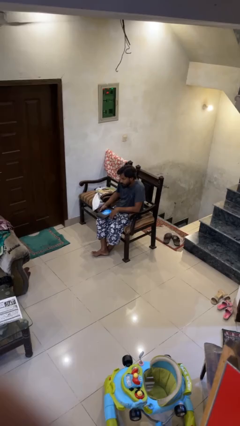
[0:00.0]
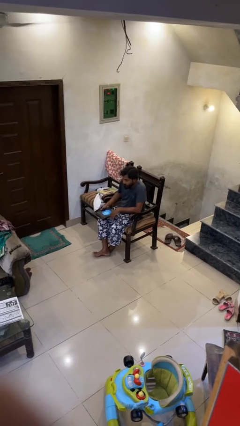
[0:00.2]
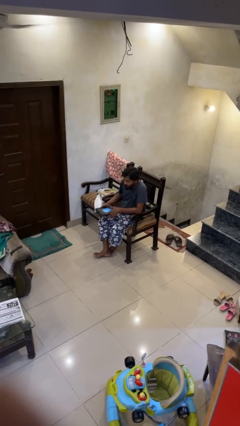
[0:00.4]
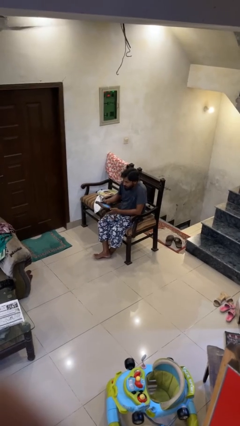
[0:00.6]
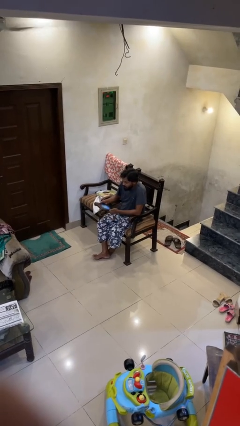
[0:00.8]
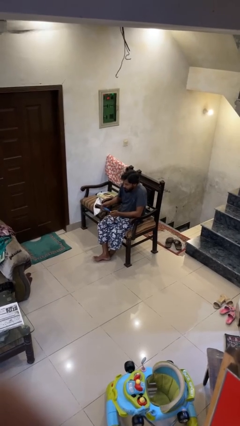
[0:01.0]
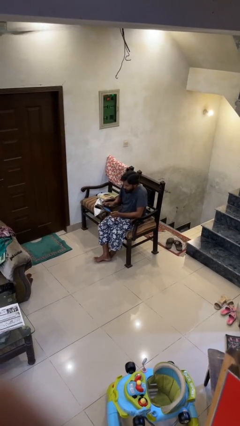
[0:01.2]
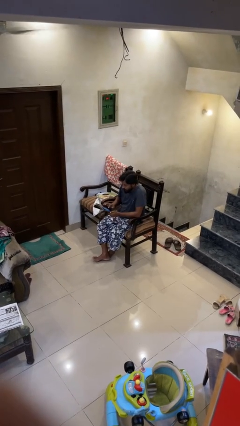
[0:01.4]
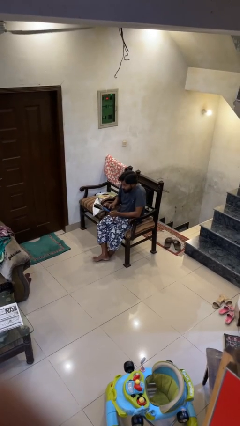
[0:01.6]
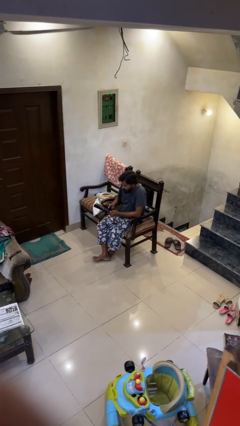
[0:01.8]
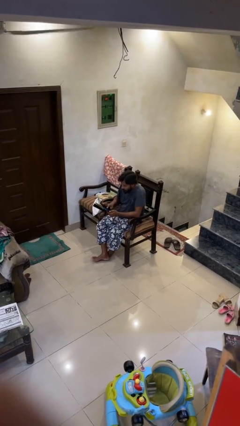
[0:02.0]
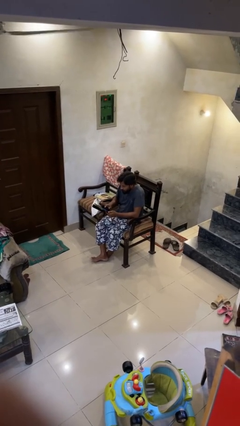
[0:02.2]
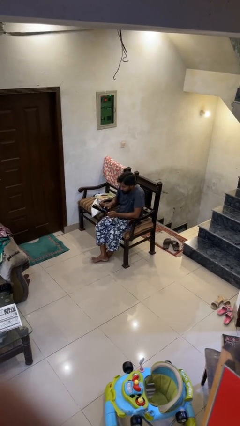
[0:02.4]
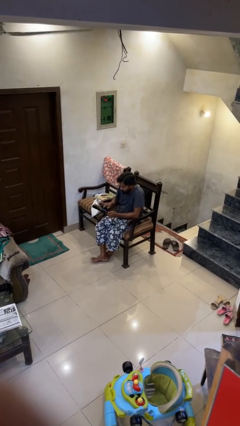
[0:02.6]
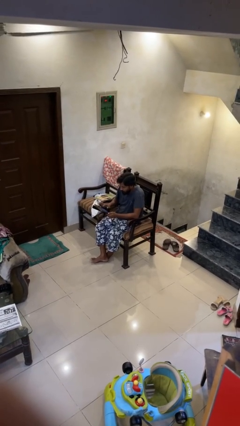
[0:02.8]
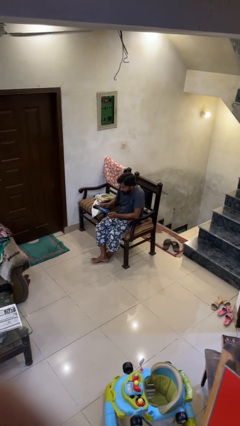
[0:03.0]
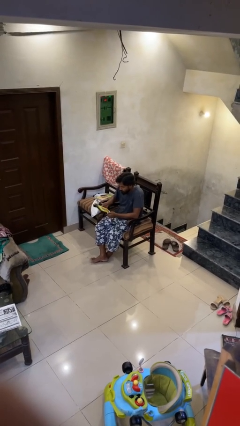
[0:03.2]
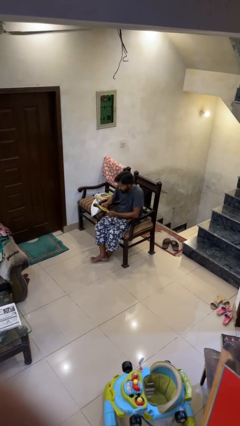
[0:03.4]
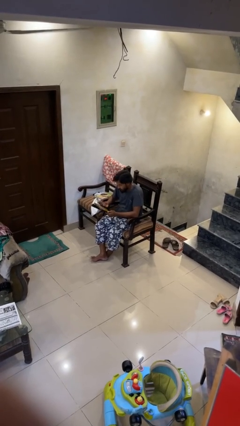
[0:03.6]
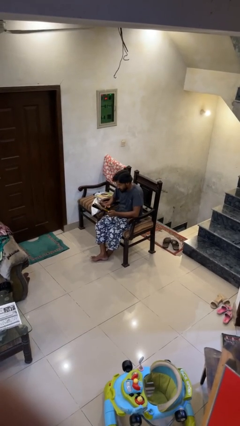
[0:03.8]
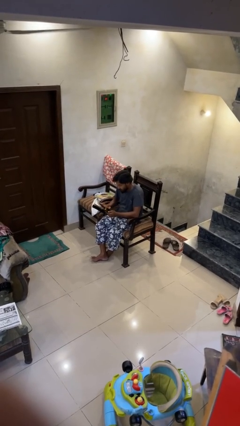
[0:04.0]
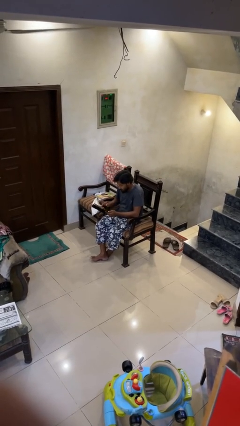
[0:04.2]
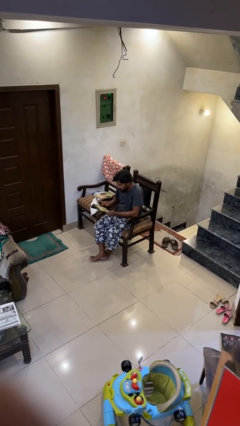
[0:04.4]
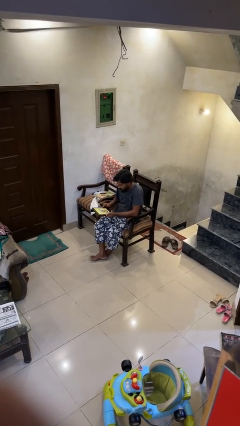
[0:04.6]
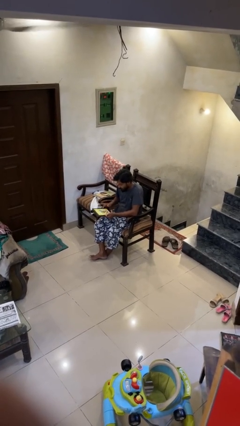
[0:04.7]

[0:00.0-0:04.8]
person interacts with tablet

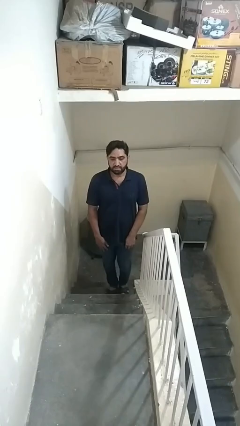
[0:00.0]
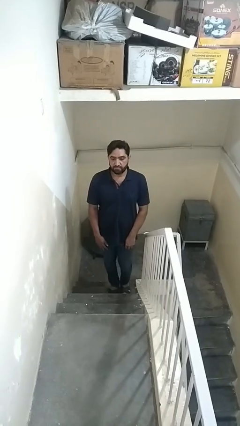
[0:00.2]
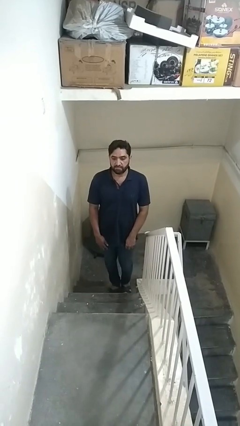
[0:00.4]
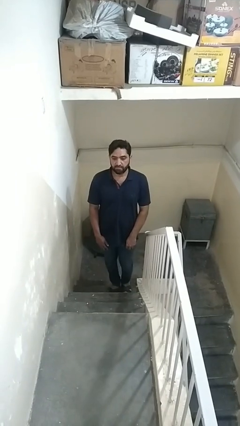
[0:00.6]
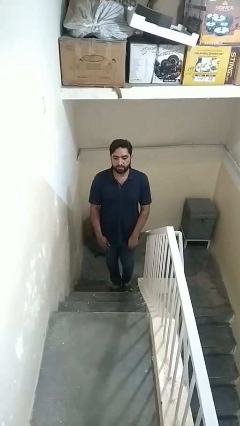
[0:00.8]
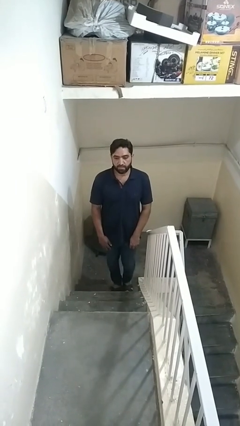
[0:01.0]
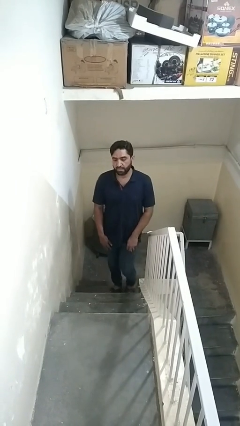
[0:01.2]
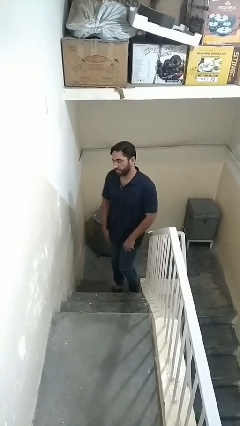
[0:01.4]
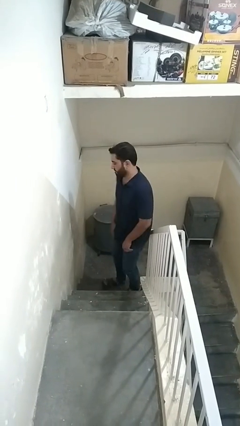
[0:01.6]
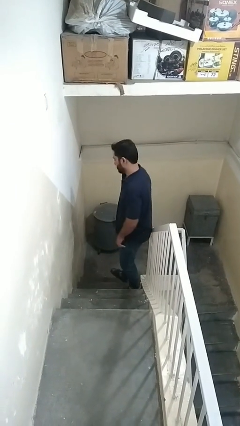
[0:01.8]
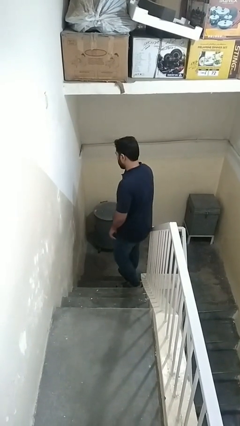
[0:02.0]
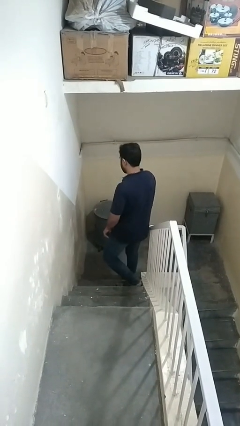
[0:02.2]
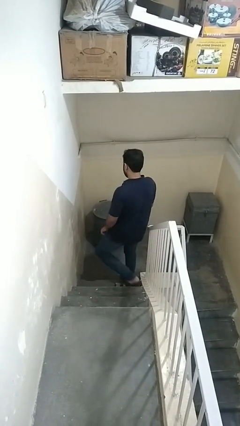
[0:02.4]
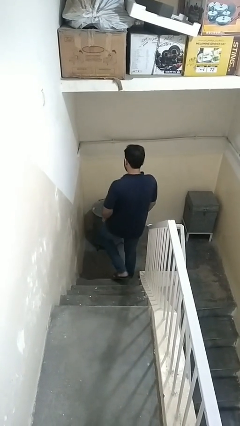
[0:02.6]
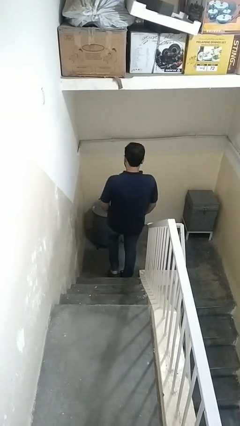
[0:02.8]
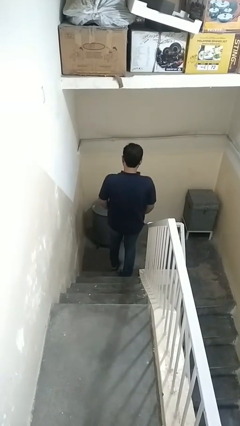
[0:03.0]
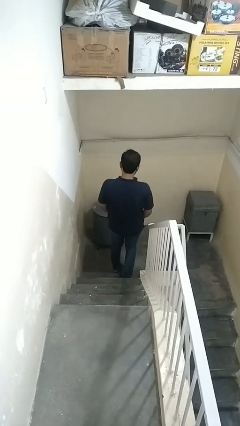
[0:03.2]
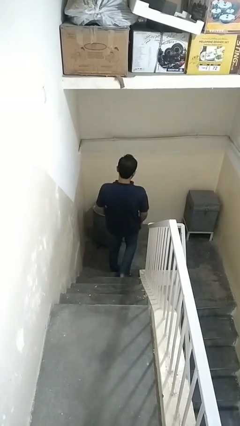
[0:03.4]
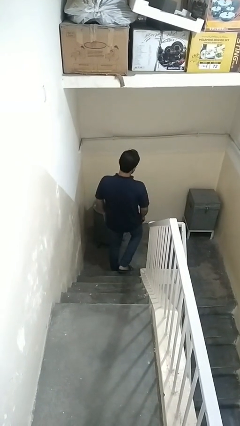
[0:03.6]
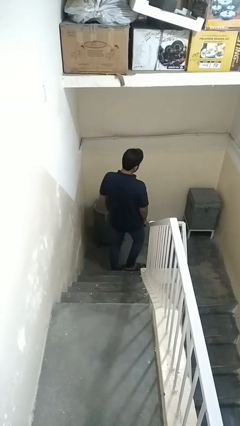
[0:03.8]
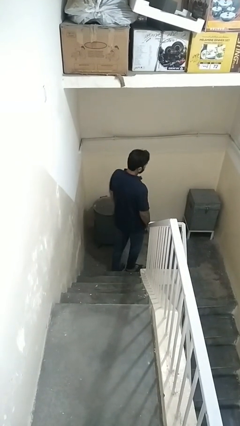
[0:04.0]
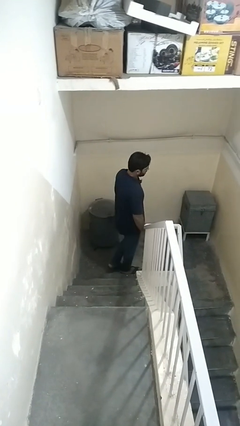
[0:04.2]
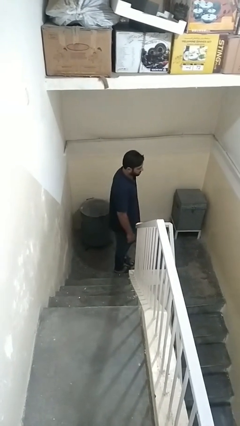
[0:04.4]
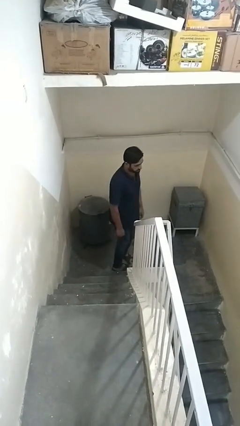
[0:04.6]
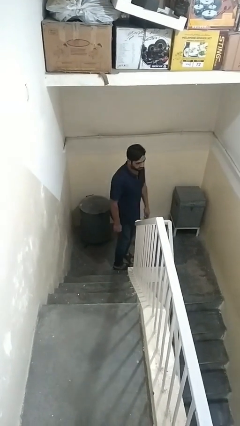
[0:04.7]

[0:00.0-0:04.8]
person climbs down stairs

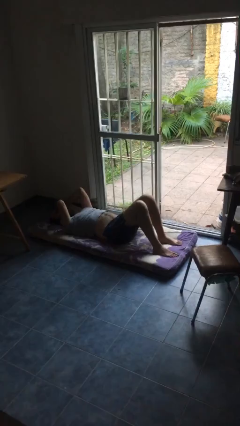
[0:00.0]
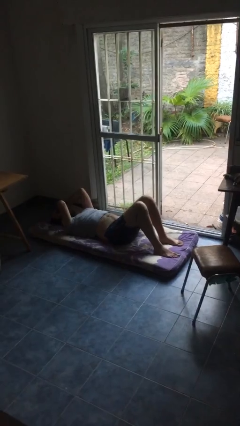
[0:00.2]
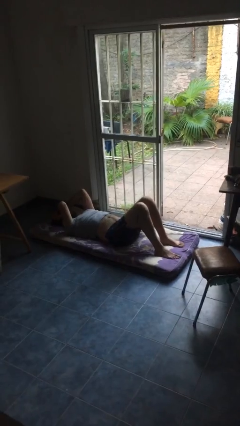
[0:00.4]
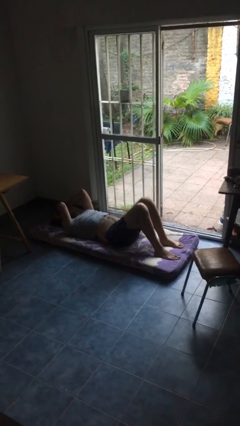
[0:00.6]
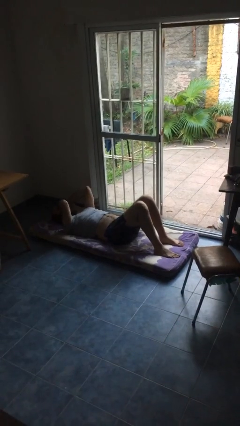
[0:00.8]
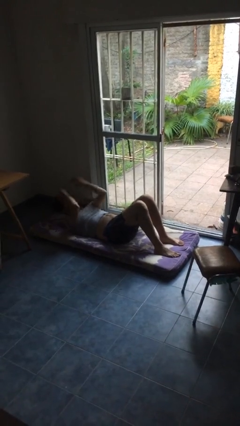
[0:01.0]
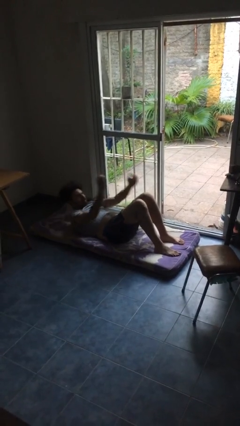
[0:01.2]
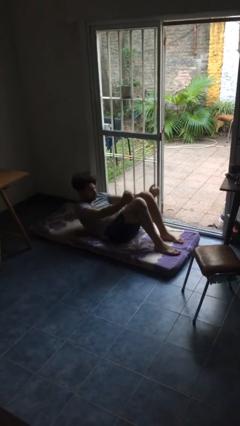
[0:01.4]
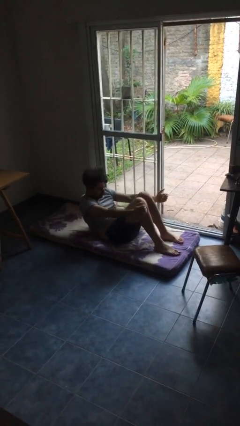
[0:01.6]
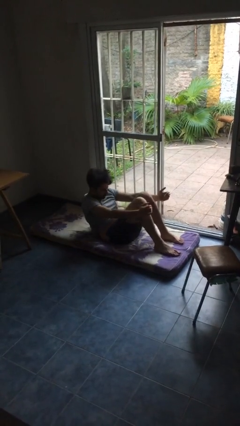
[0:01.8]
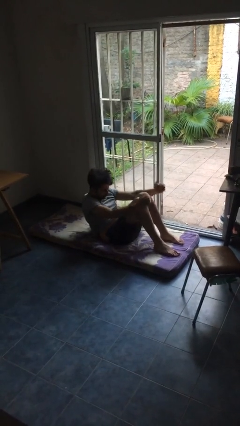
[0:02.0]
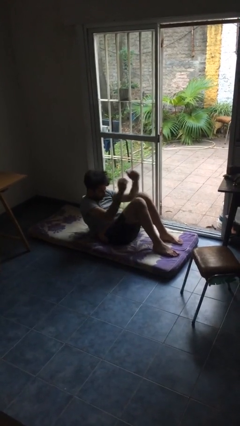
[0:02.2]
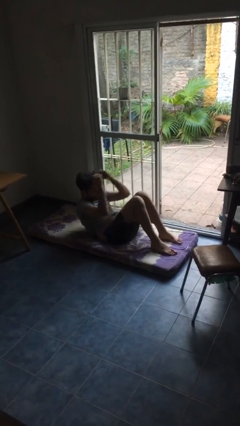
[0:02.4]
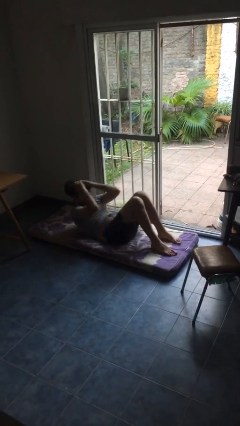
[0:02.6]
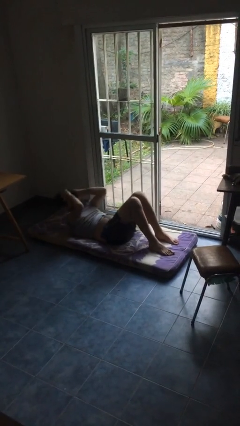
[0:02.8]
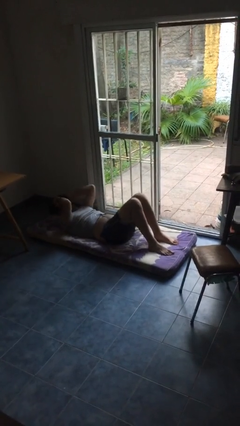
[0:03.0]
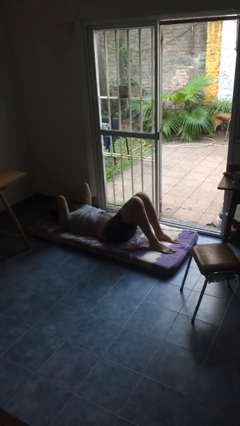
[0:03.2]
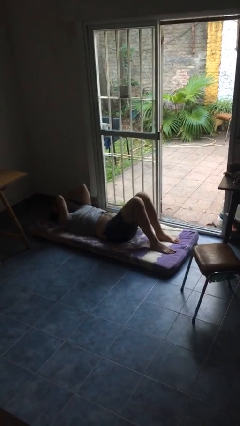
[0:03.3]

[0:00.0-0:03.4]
person exercises with situp

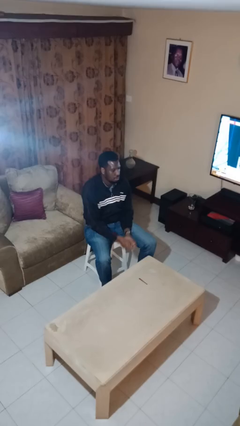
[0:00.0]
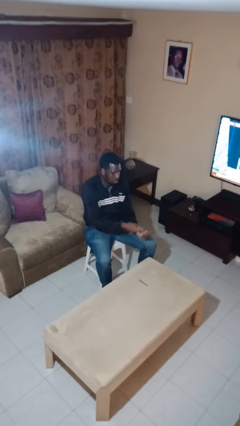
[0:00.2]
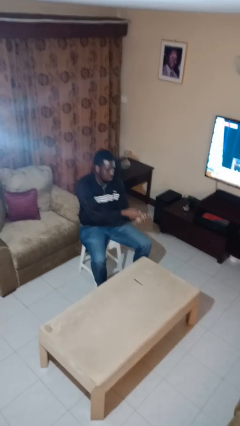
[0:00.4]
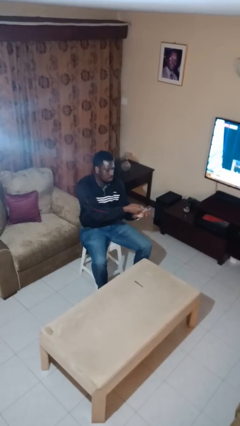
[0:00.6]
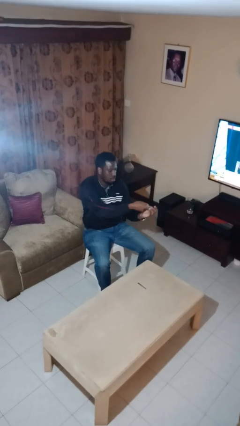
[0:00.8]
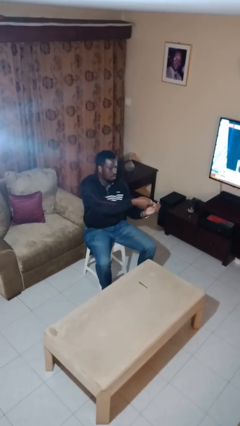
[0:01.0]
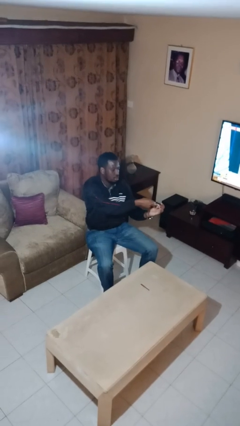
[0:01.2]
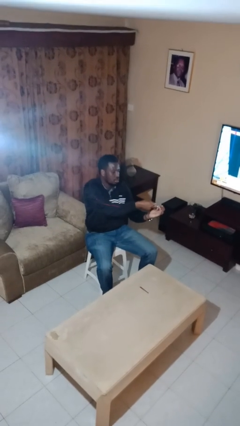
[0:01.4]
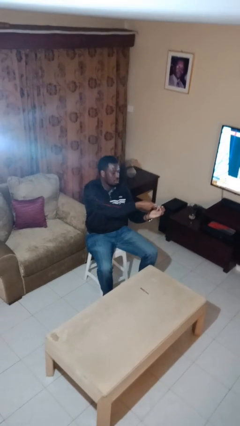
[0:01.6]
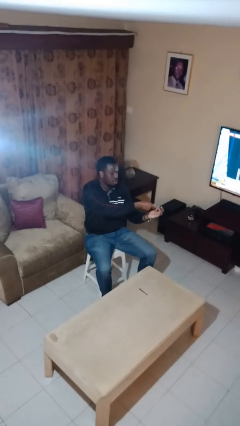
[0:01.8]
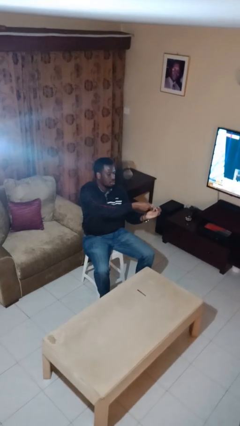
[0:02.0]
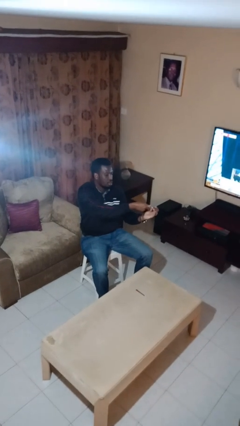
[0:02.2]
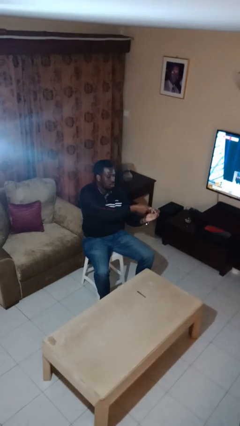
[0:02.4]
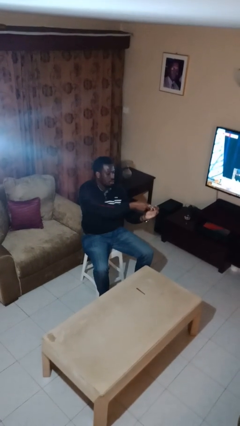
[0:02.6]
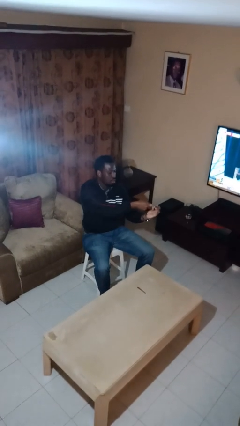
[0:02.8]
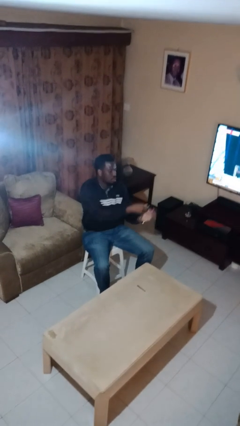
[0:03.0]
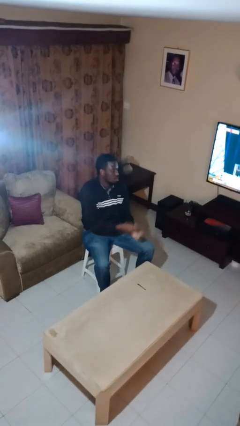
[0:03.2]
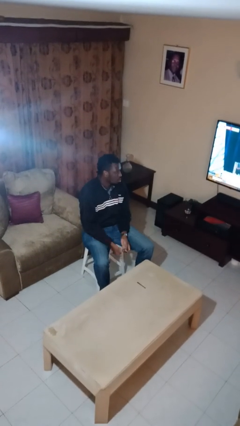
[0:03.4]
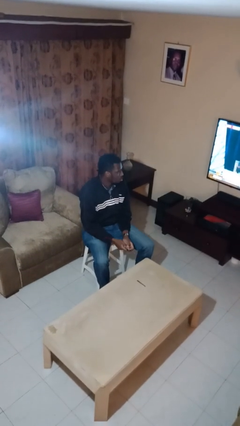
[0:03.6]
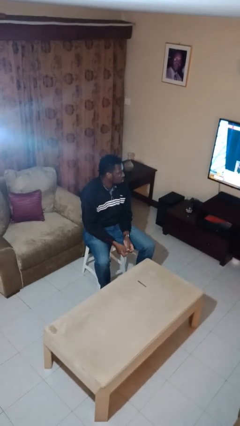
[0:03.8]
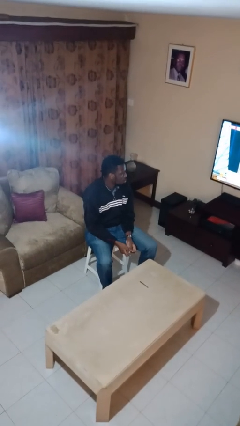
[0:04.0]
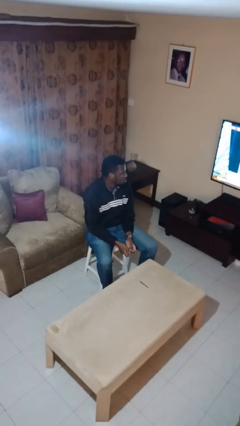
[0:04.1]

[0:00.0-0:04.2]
person clips fingernails

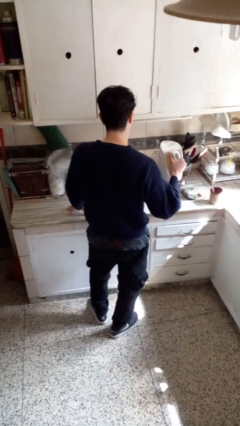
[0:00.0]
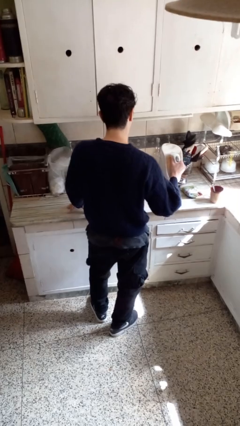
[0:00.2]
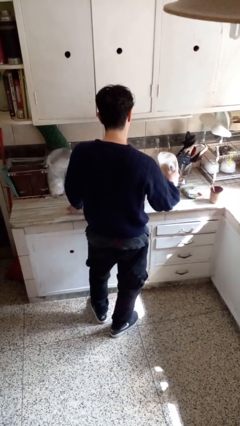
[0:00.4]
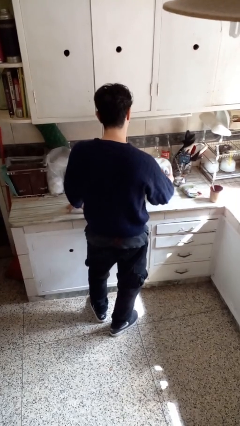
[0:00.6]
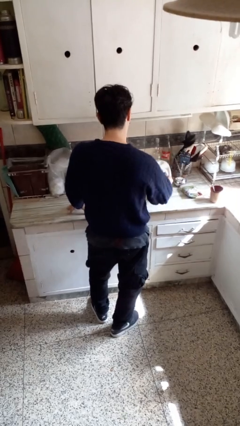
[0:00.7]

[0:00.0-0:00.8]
person puts down object on countertop
